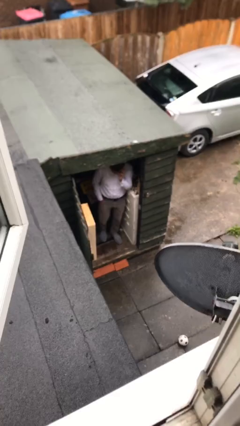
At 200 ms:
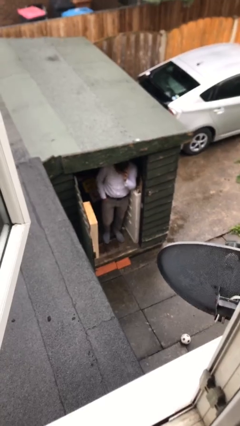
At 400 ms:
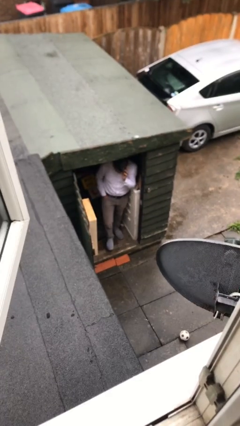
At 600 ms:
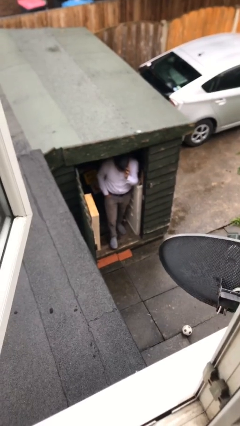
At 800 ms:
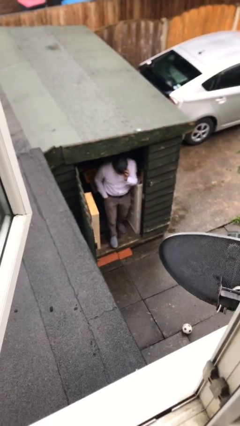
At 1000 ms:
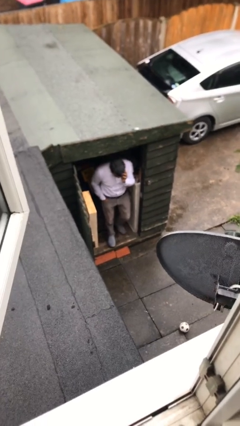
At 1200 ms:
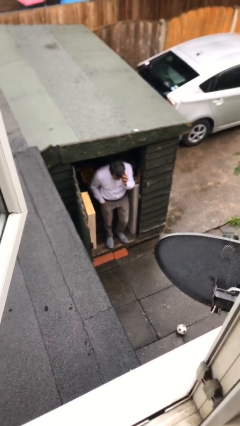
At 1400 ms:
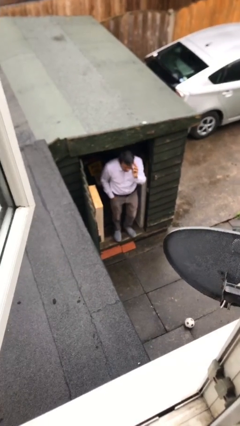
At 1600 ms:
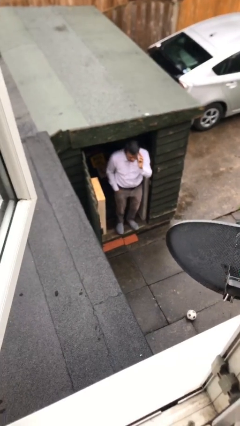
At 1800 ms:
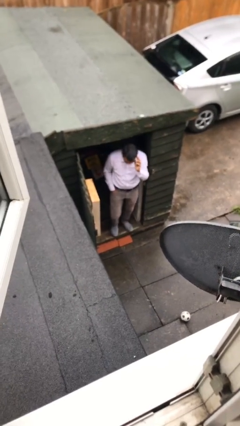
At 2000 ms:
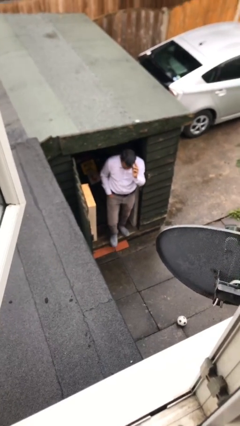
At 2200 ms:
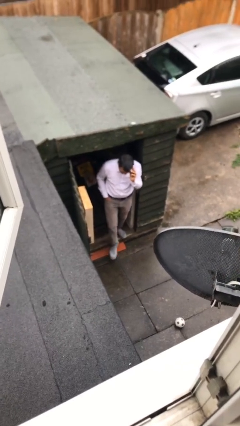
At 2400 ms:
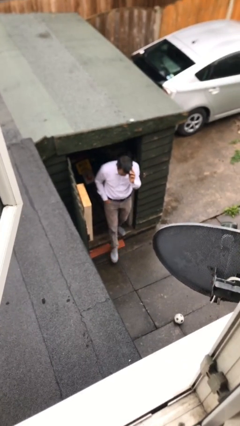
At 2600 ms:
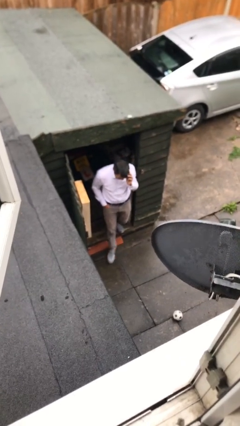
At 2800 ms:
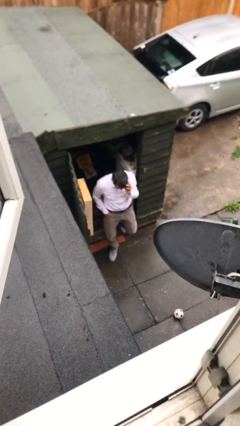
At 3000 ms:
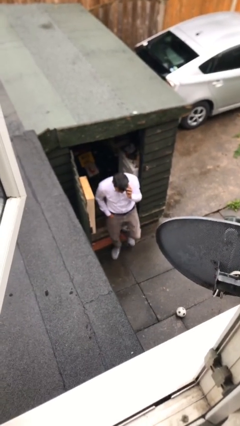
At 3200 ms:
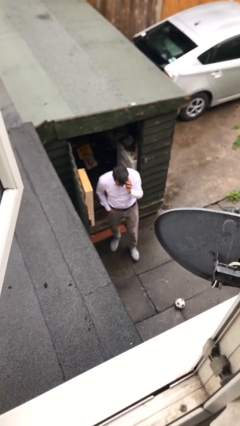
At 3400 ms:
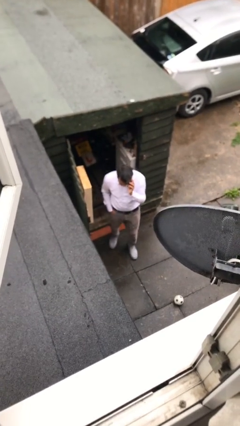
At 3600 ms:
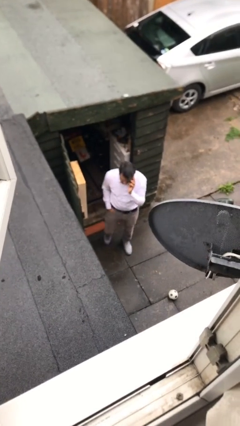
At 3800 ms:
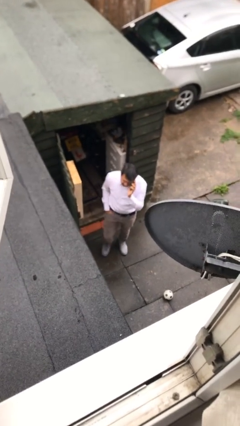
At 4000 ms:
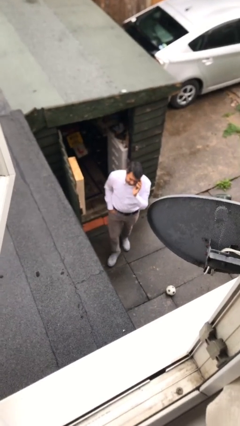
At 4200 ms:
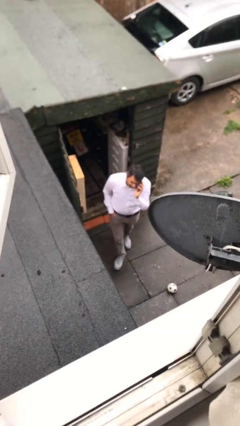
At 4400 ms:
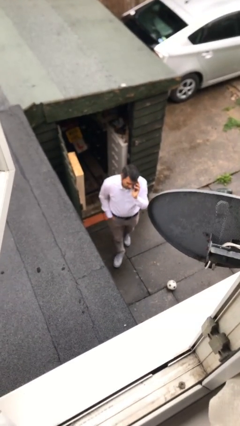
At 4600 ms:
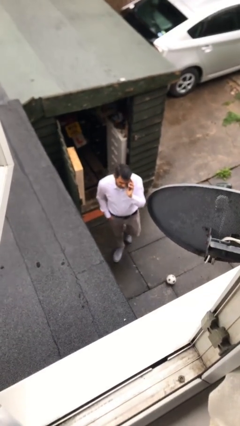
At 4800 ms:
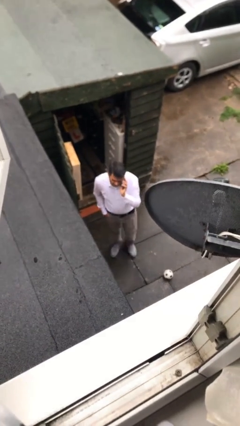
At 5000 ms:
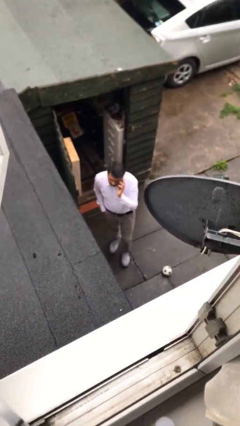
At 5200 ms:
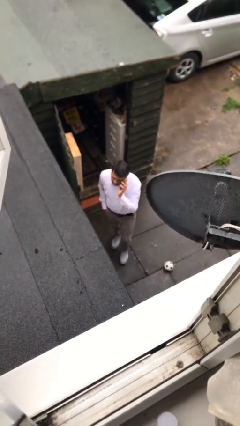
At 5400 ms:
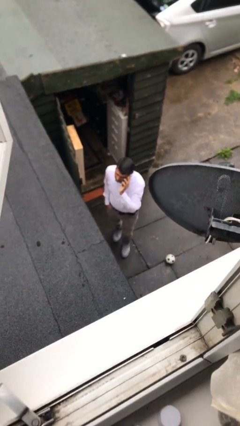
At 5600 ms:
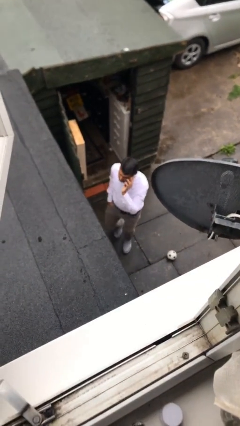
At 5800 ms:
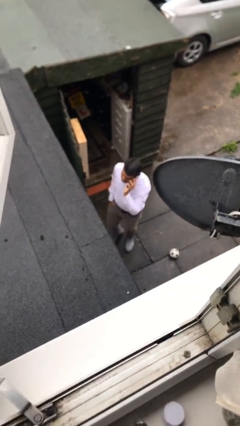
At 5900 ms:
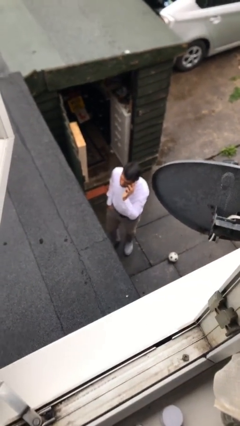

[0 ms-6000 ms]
person enters scene through structure

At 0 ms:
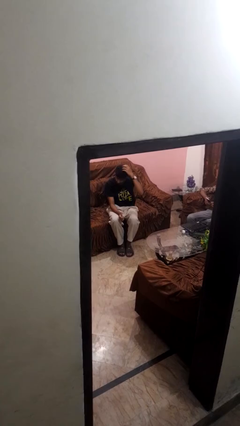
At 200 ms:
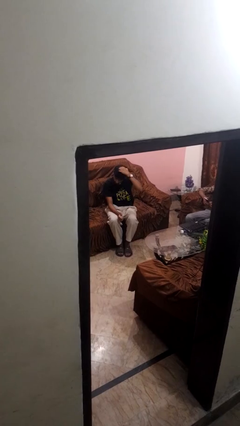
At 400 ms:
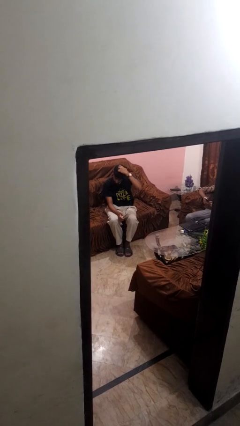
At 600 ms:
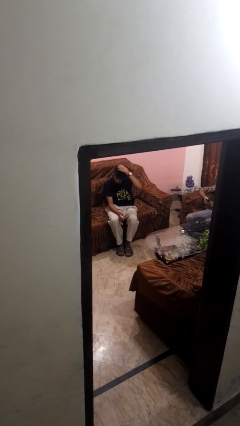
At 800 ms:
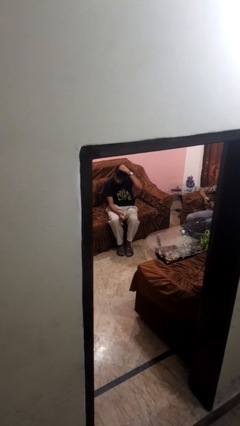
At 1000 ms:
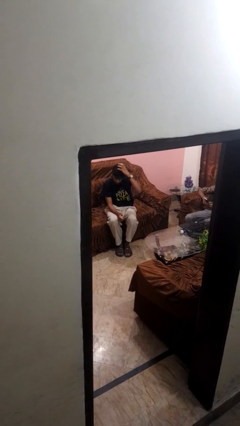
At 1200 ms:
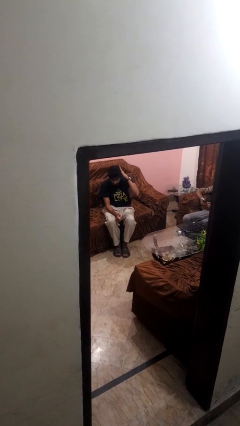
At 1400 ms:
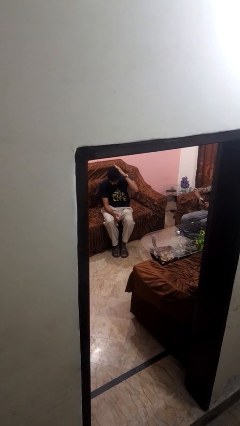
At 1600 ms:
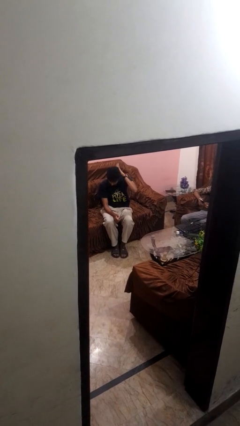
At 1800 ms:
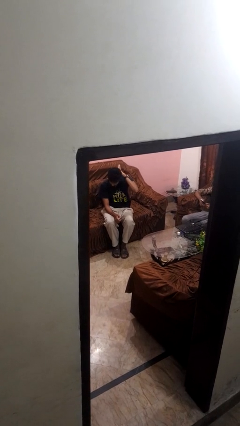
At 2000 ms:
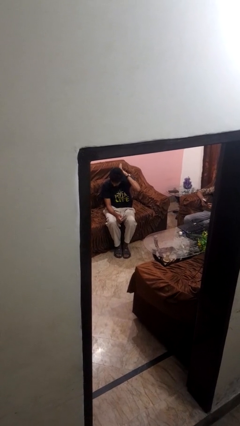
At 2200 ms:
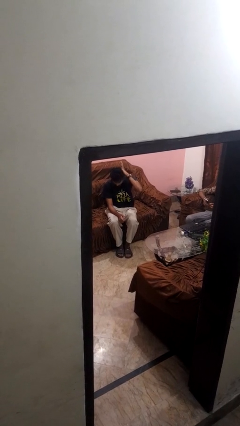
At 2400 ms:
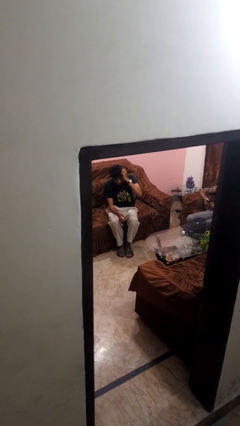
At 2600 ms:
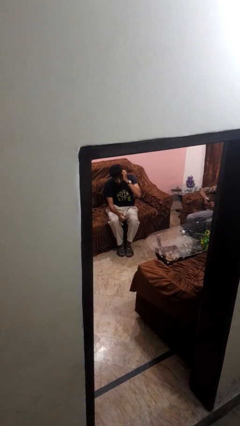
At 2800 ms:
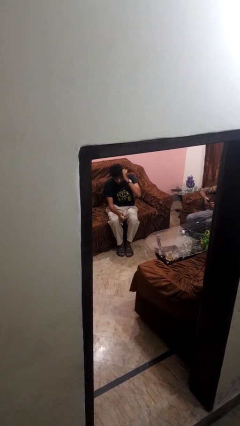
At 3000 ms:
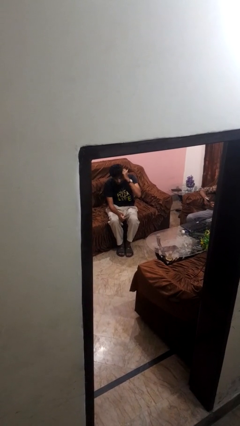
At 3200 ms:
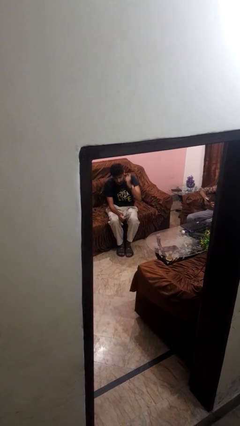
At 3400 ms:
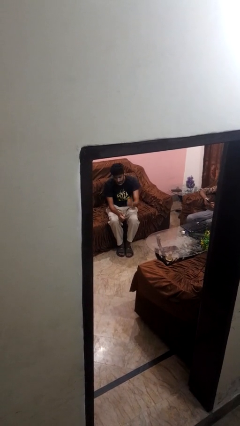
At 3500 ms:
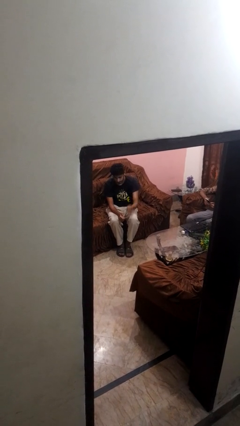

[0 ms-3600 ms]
person scratches face

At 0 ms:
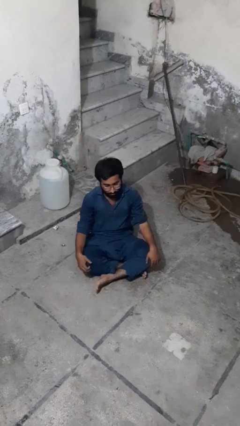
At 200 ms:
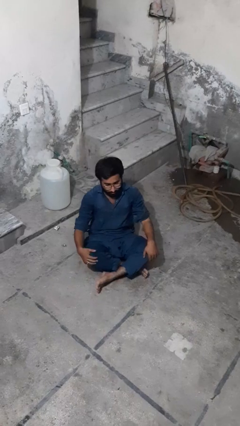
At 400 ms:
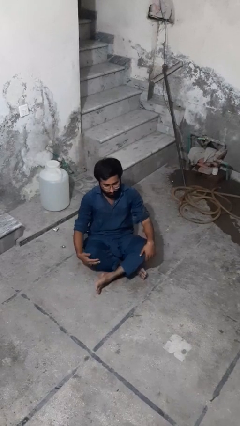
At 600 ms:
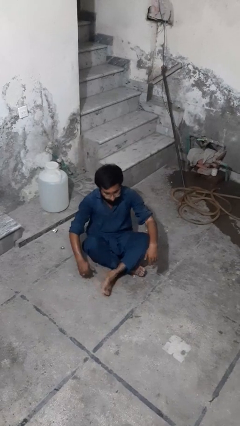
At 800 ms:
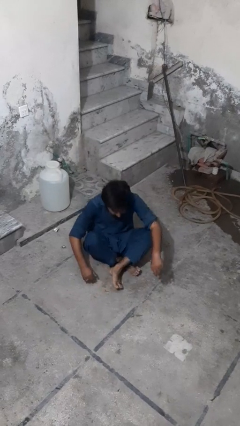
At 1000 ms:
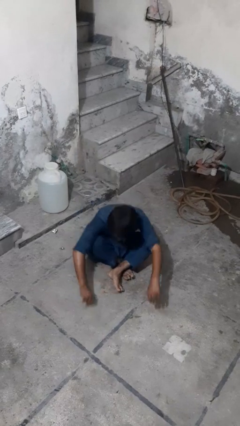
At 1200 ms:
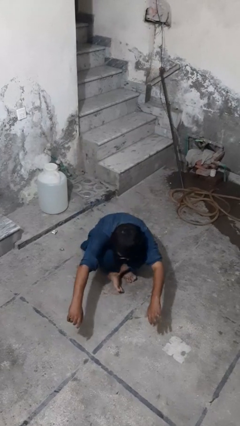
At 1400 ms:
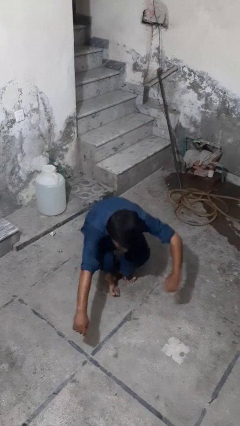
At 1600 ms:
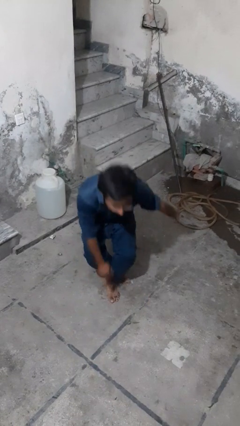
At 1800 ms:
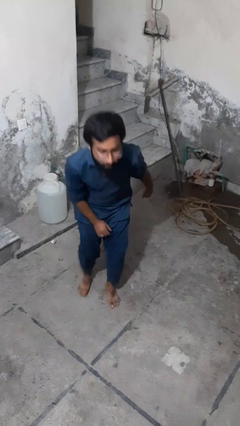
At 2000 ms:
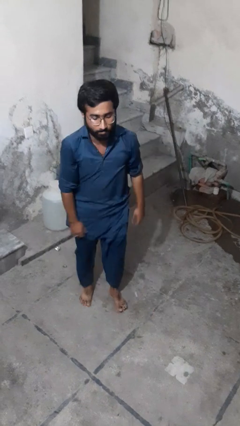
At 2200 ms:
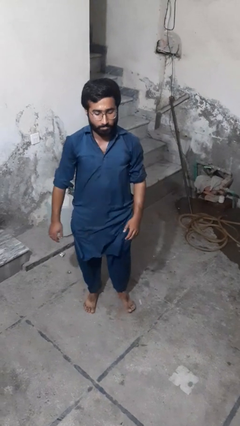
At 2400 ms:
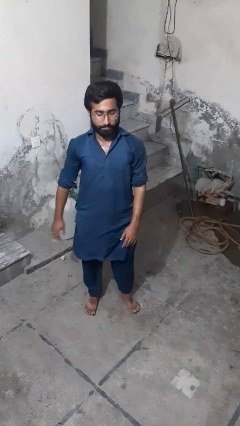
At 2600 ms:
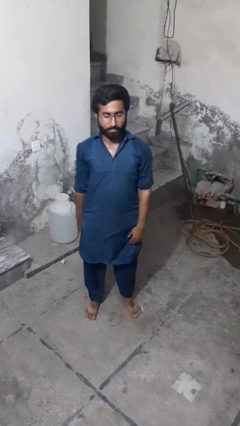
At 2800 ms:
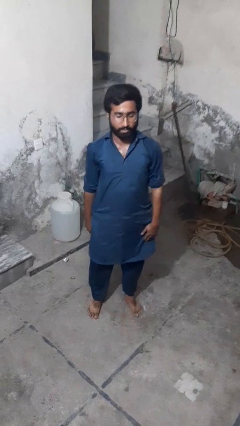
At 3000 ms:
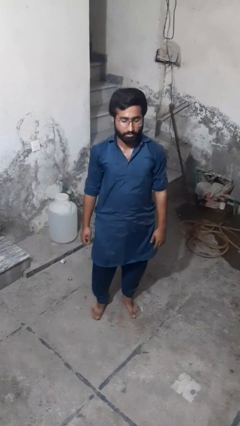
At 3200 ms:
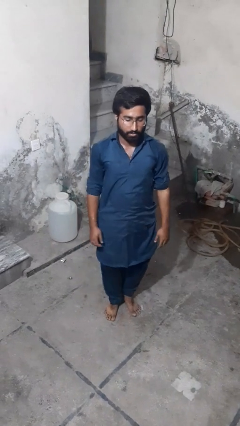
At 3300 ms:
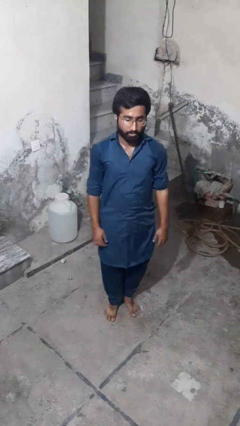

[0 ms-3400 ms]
person stands up from floor

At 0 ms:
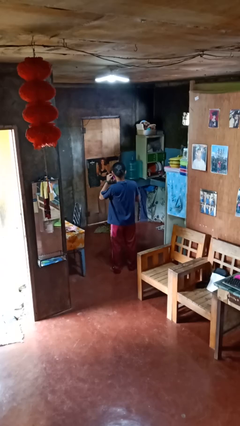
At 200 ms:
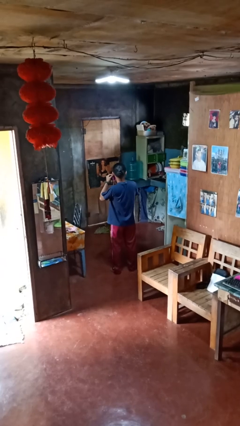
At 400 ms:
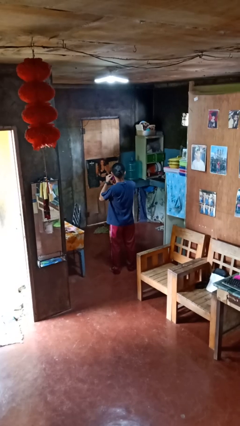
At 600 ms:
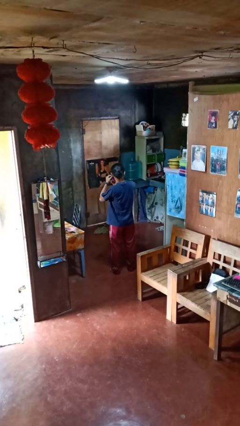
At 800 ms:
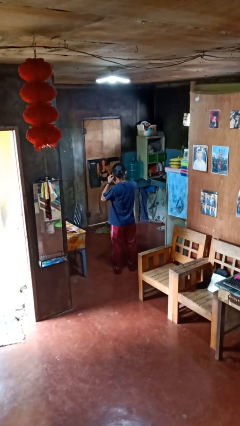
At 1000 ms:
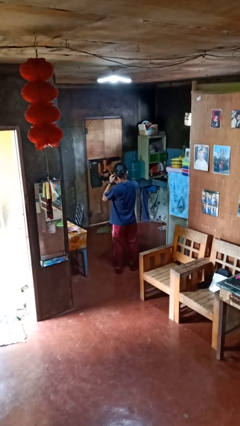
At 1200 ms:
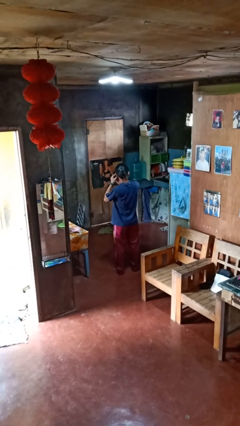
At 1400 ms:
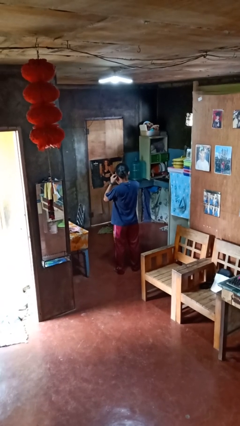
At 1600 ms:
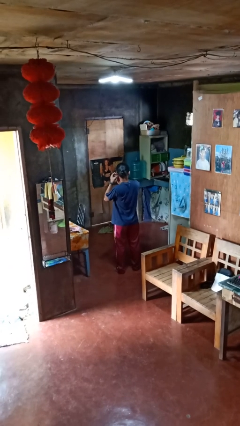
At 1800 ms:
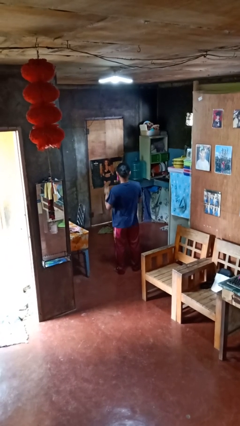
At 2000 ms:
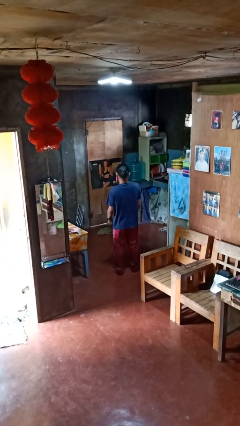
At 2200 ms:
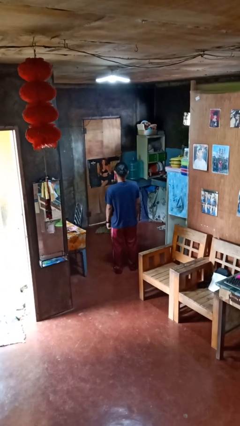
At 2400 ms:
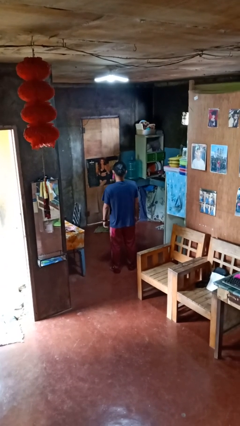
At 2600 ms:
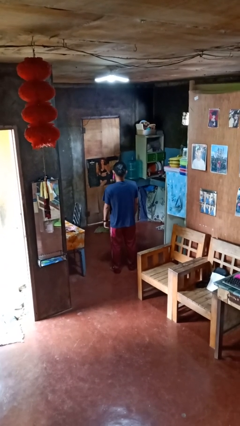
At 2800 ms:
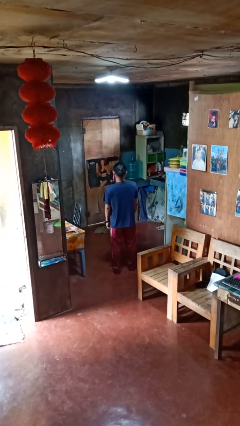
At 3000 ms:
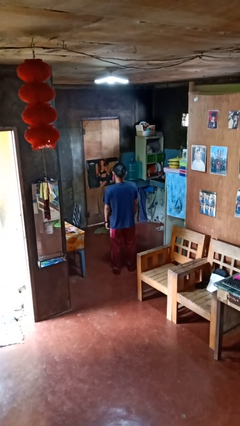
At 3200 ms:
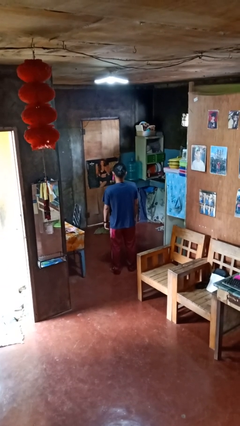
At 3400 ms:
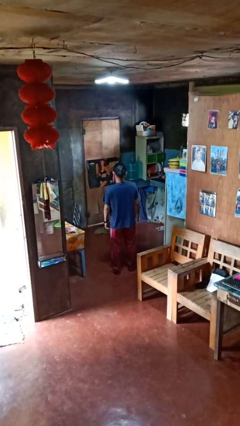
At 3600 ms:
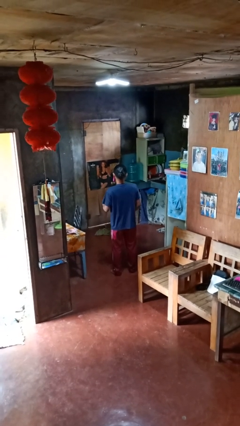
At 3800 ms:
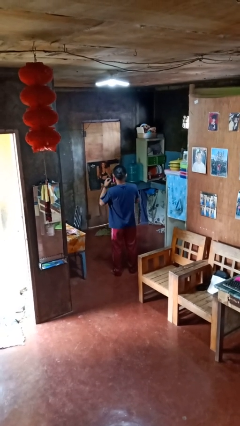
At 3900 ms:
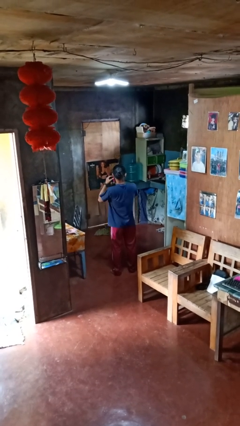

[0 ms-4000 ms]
person puts on earrings

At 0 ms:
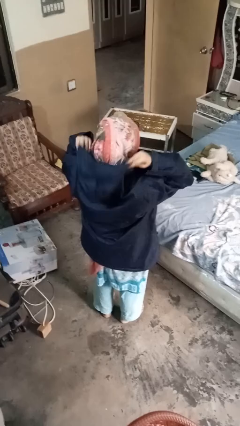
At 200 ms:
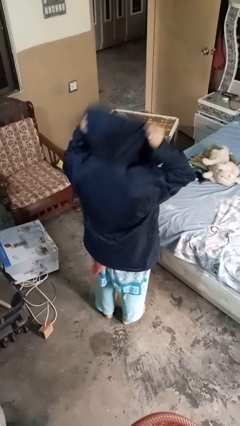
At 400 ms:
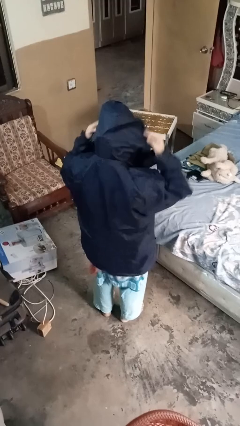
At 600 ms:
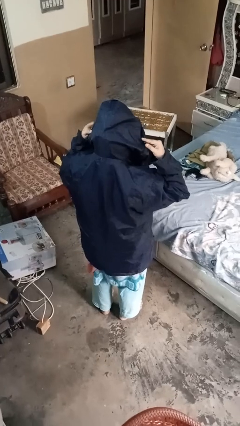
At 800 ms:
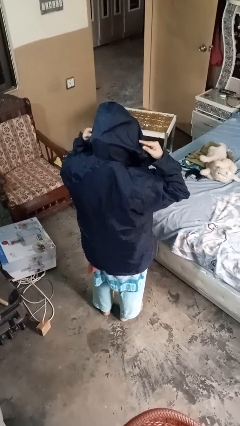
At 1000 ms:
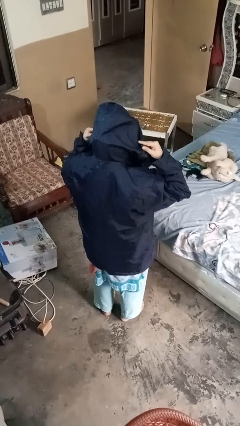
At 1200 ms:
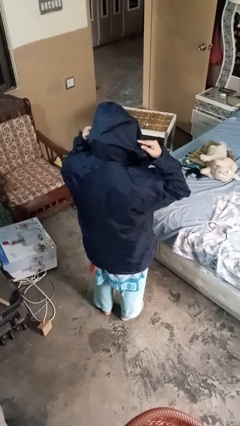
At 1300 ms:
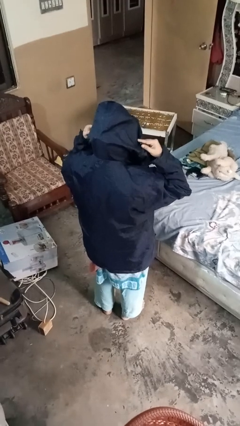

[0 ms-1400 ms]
person puts on hoodie
